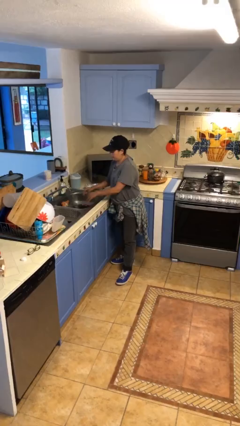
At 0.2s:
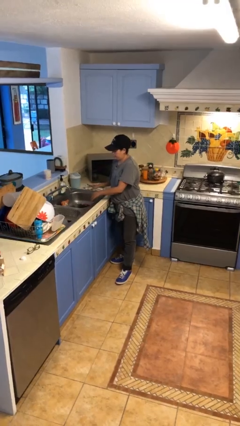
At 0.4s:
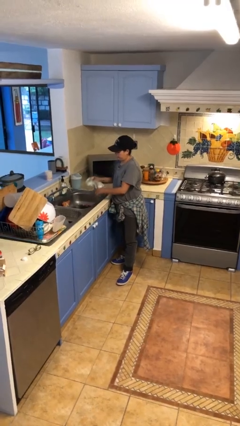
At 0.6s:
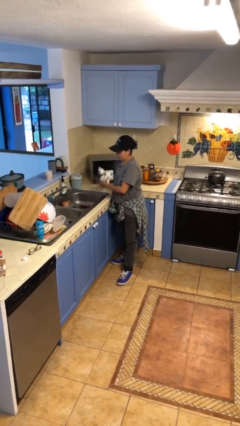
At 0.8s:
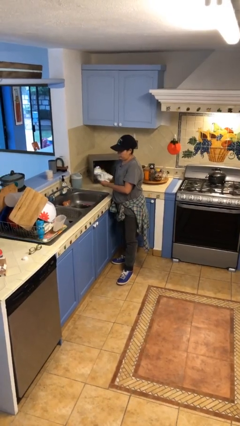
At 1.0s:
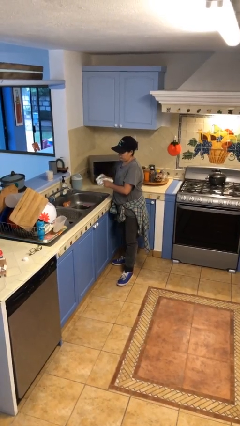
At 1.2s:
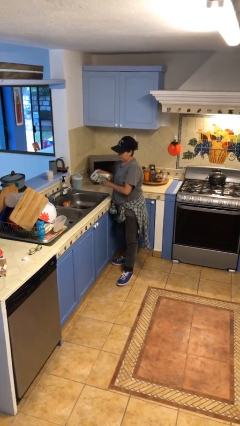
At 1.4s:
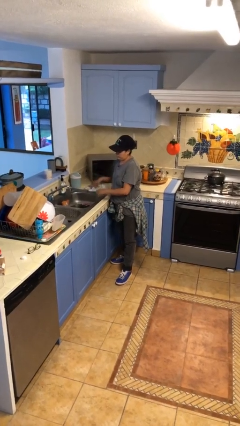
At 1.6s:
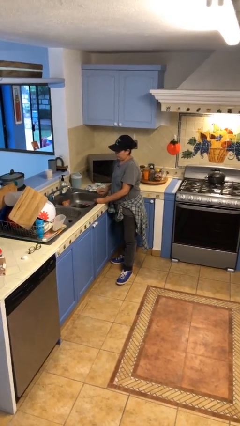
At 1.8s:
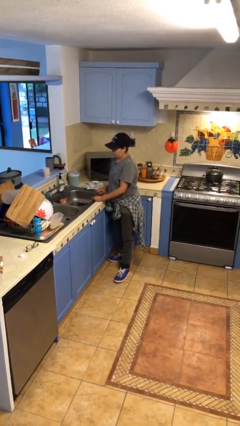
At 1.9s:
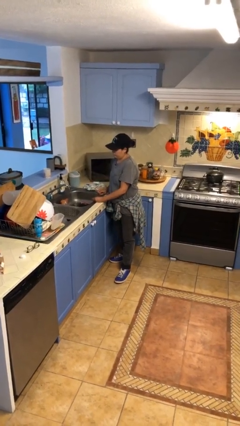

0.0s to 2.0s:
person dries hands with towel

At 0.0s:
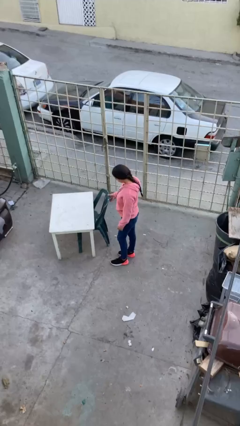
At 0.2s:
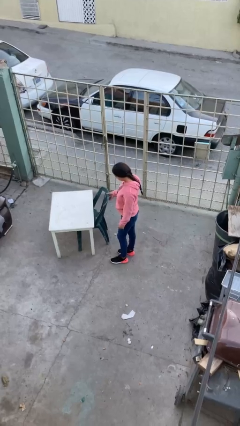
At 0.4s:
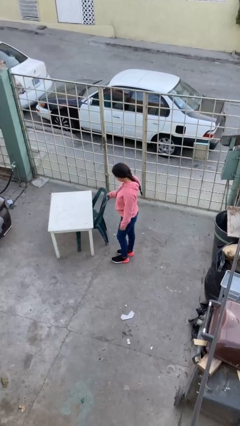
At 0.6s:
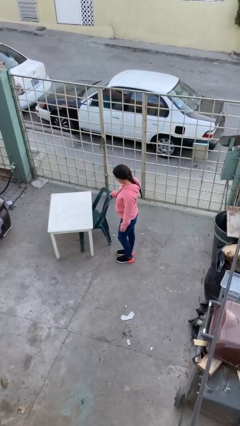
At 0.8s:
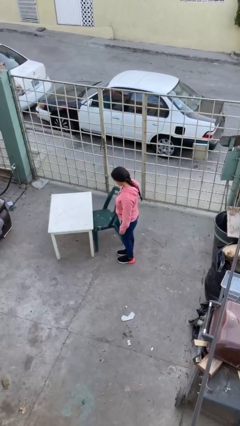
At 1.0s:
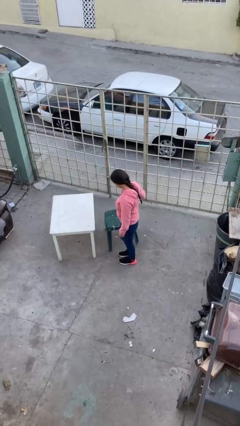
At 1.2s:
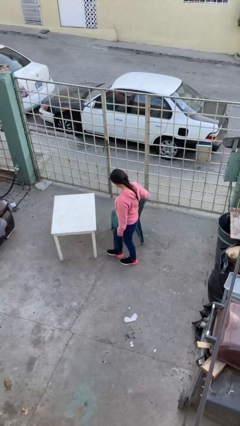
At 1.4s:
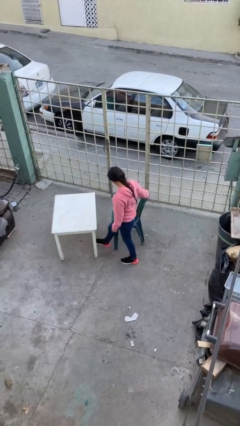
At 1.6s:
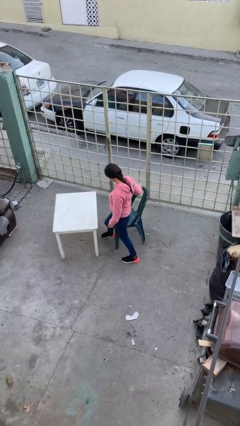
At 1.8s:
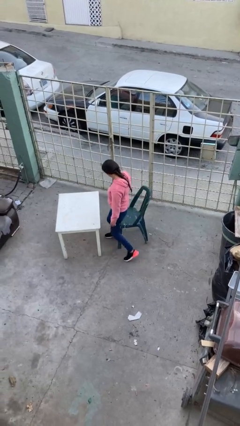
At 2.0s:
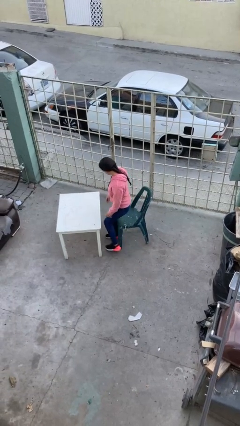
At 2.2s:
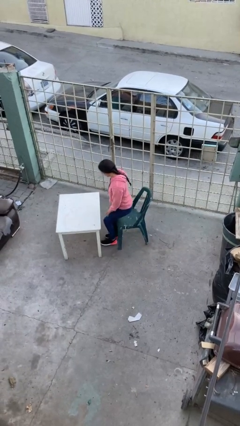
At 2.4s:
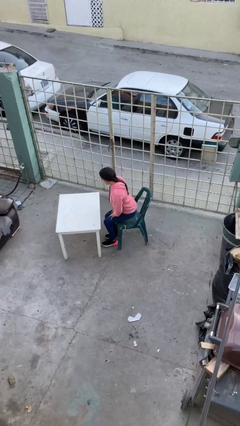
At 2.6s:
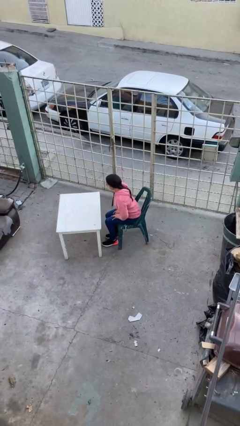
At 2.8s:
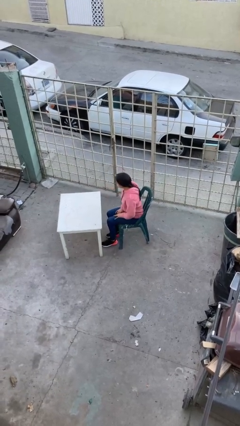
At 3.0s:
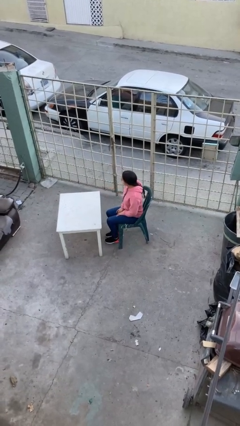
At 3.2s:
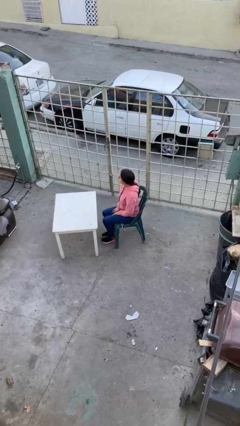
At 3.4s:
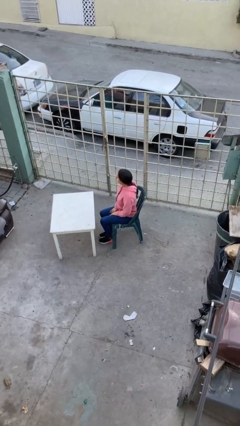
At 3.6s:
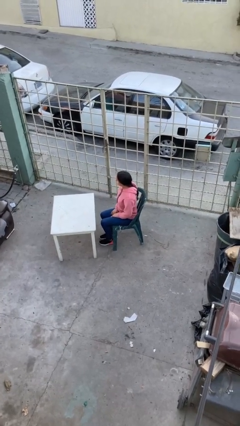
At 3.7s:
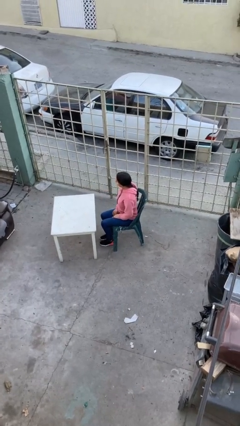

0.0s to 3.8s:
person sits down

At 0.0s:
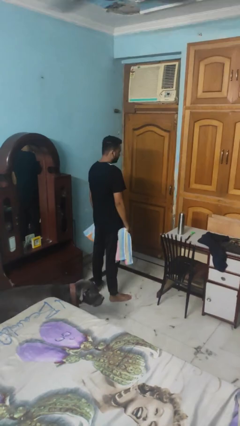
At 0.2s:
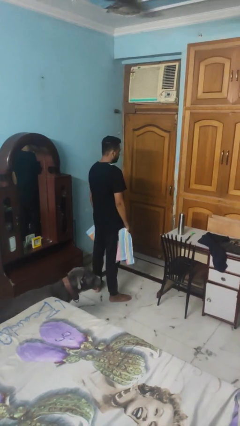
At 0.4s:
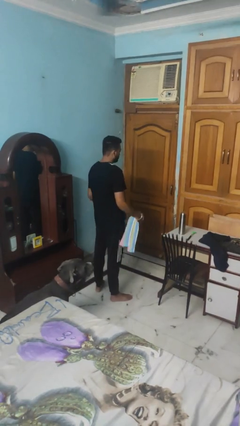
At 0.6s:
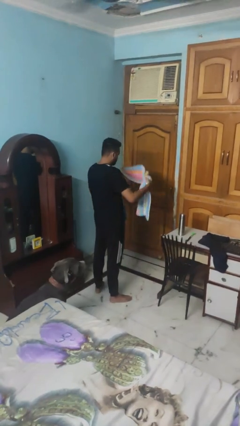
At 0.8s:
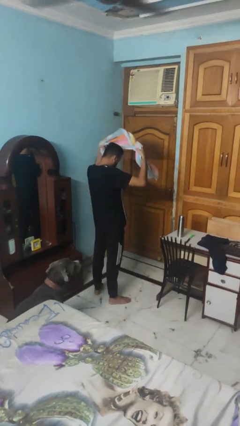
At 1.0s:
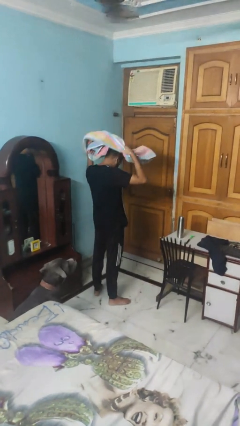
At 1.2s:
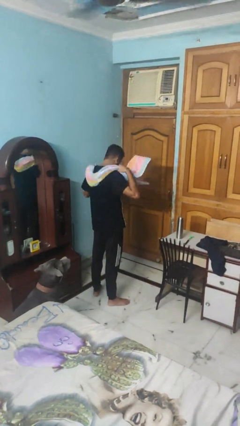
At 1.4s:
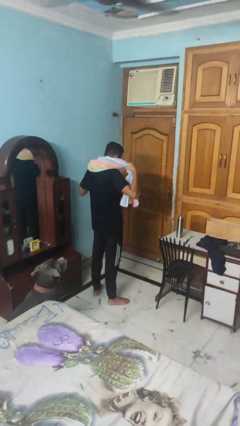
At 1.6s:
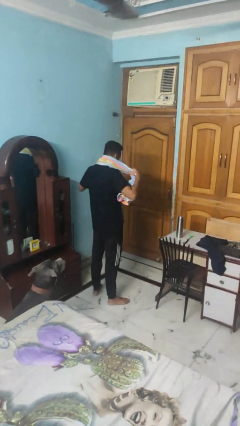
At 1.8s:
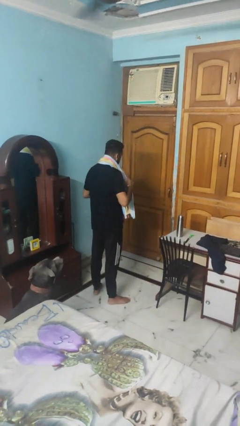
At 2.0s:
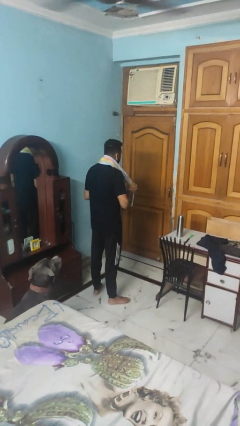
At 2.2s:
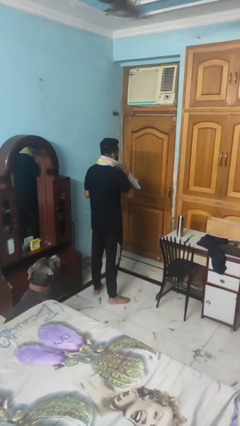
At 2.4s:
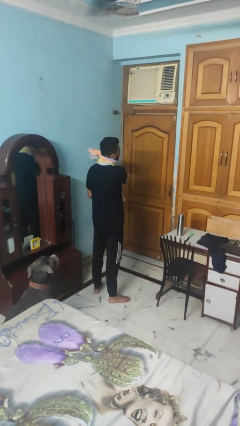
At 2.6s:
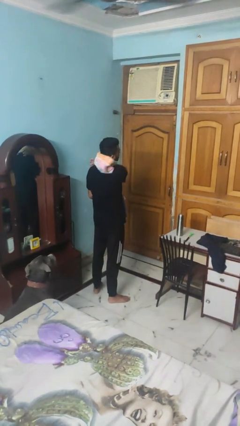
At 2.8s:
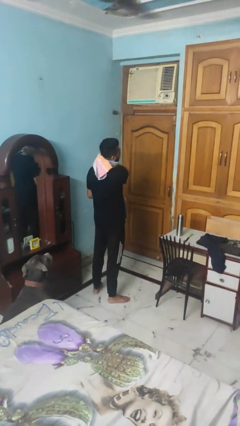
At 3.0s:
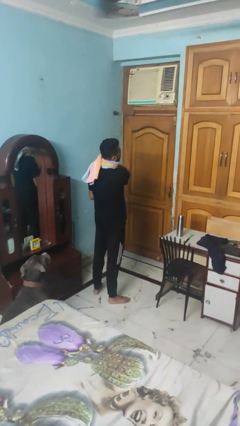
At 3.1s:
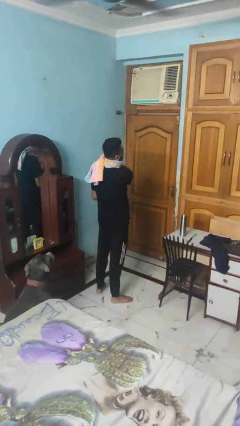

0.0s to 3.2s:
person puts on scarf

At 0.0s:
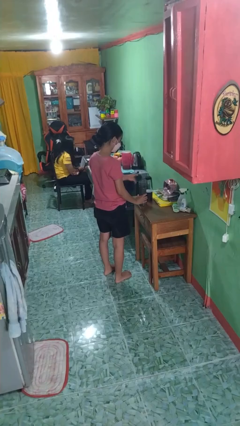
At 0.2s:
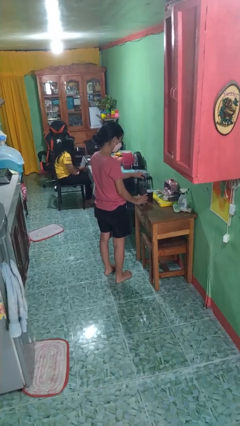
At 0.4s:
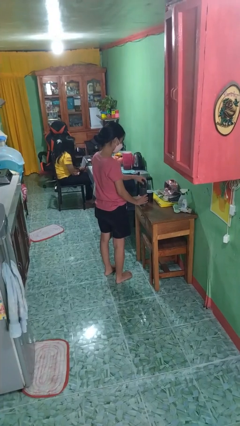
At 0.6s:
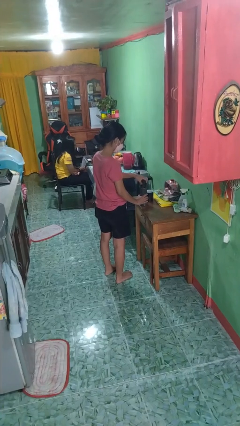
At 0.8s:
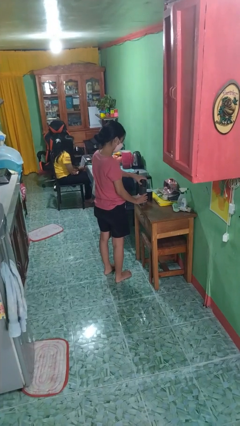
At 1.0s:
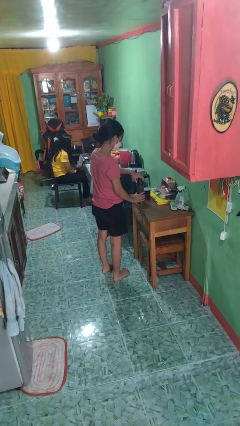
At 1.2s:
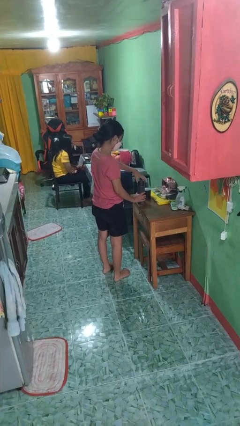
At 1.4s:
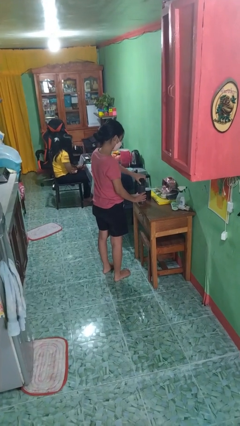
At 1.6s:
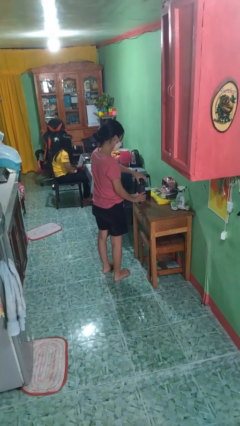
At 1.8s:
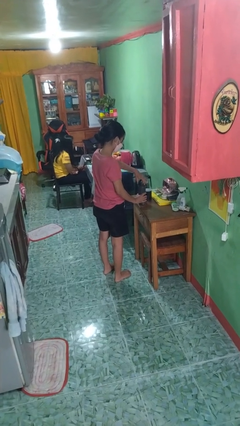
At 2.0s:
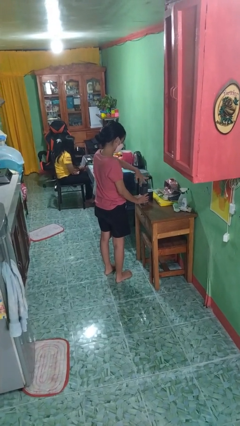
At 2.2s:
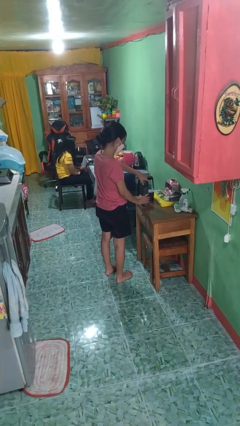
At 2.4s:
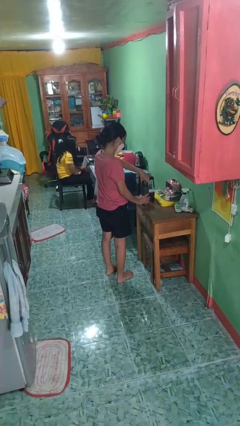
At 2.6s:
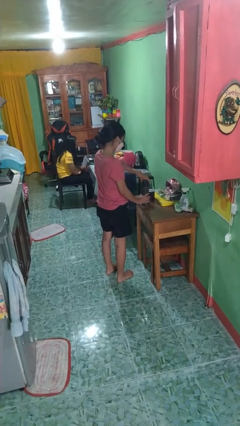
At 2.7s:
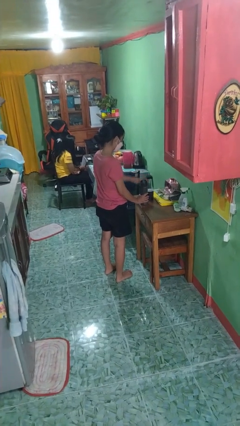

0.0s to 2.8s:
person screws lid to bottle

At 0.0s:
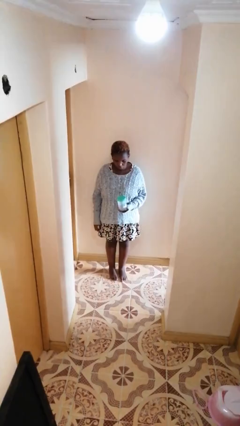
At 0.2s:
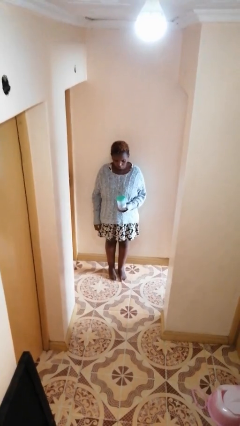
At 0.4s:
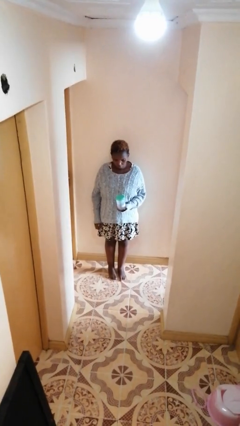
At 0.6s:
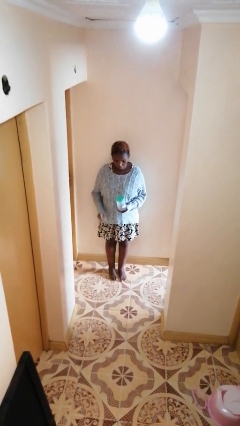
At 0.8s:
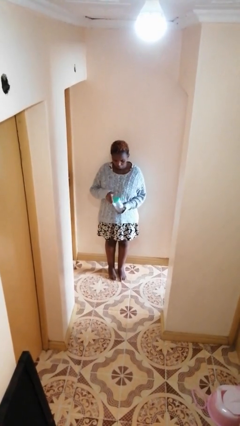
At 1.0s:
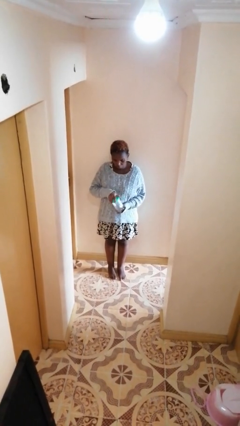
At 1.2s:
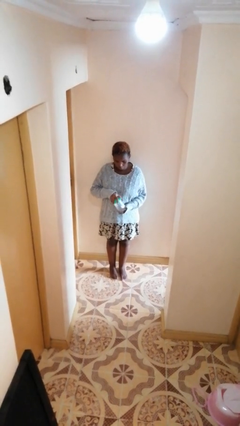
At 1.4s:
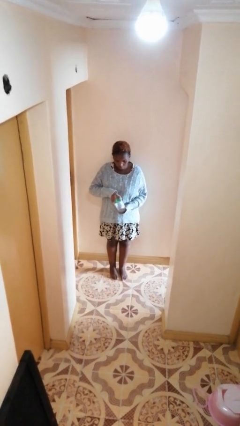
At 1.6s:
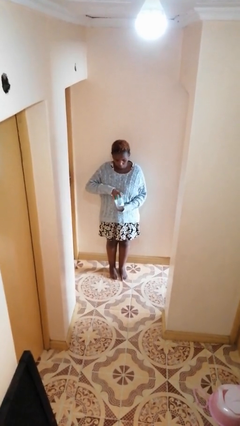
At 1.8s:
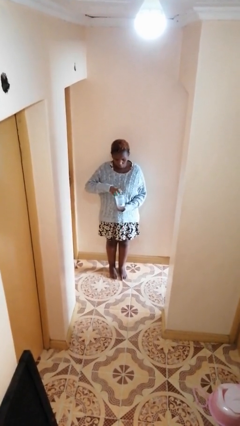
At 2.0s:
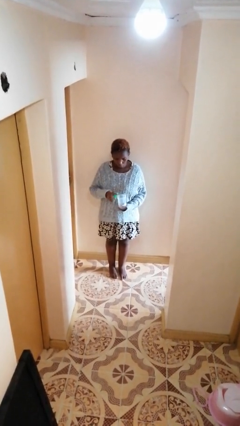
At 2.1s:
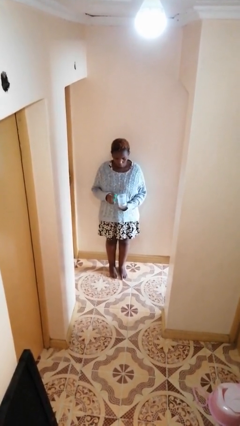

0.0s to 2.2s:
person opens jar

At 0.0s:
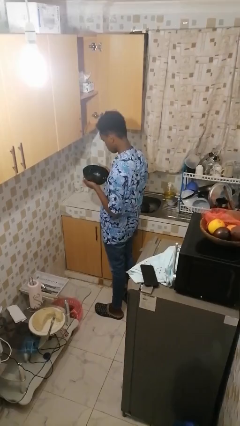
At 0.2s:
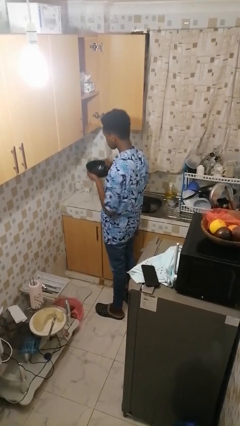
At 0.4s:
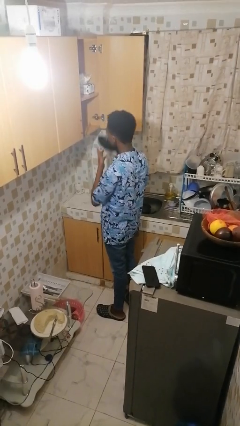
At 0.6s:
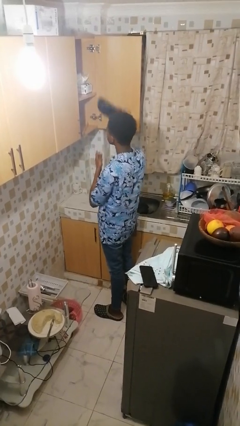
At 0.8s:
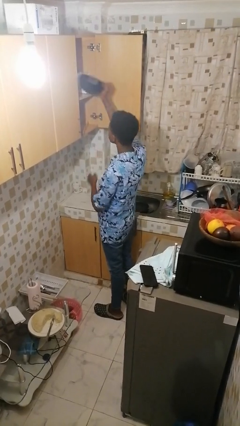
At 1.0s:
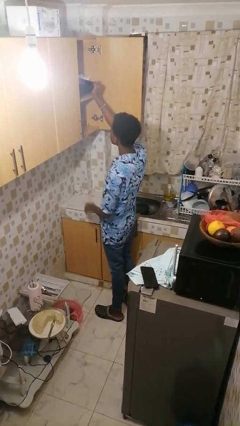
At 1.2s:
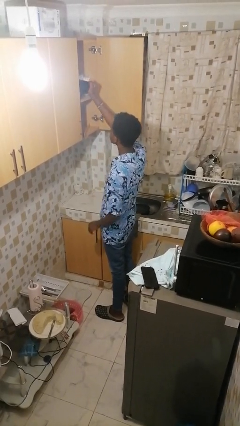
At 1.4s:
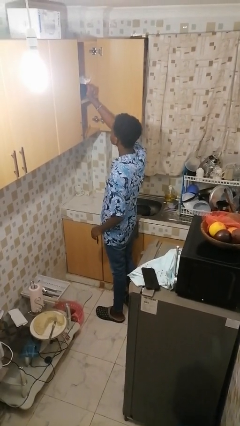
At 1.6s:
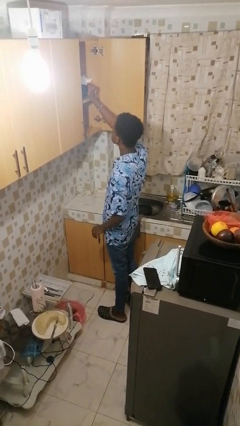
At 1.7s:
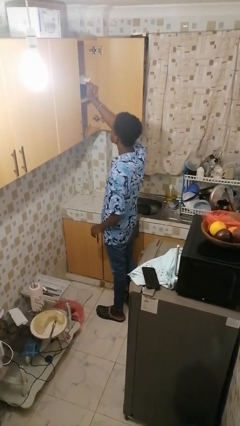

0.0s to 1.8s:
person puts down object into cabinet

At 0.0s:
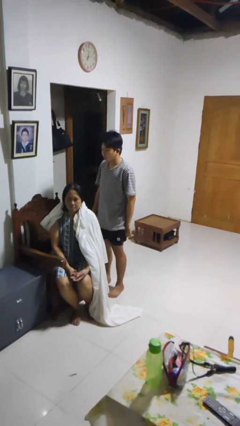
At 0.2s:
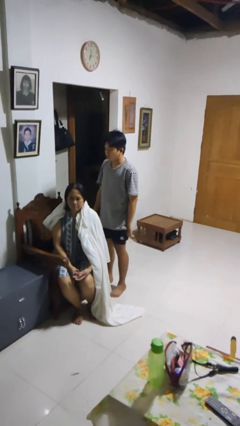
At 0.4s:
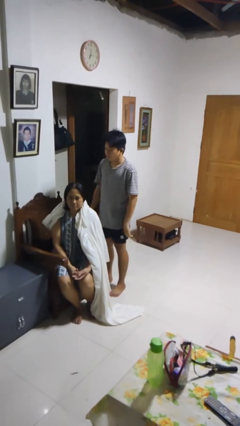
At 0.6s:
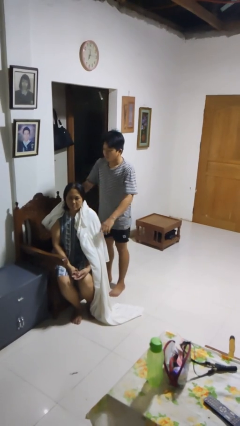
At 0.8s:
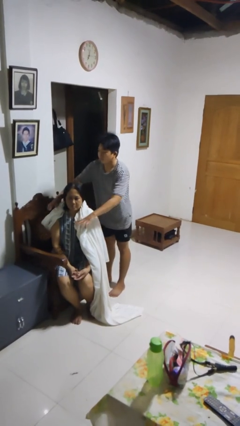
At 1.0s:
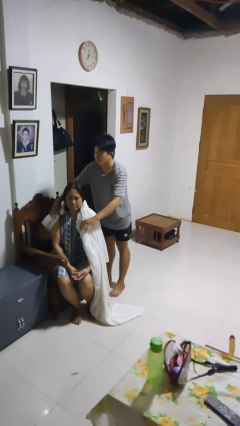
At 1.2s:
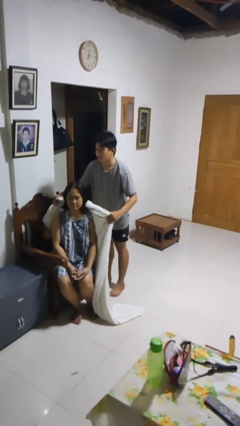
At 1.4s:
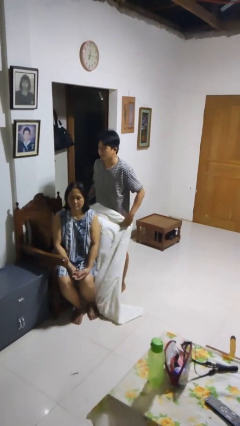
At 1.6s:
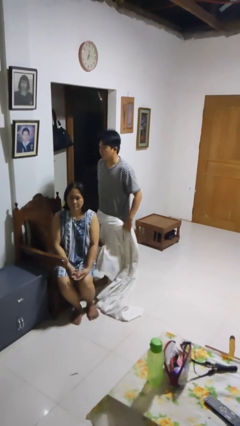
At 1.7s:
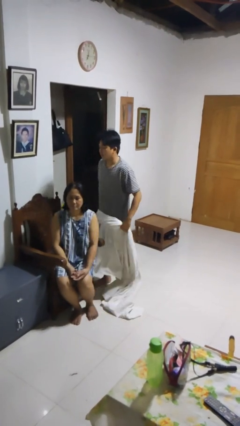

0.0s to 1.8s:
person uncovers friend with blanket
